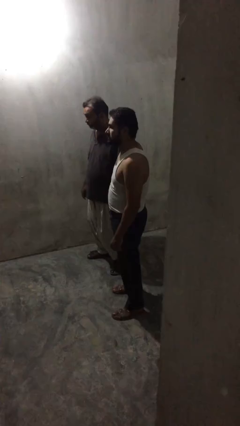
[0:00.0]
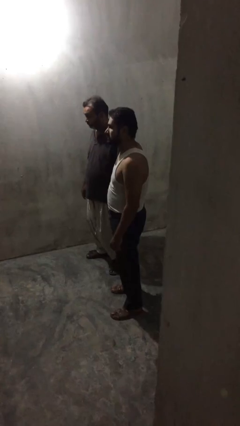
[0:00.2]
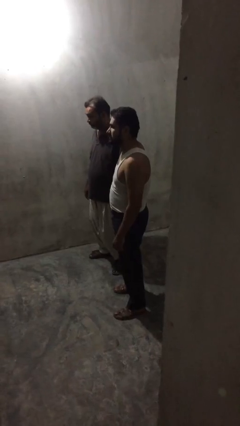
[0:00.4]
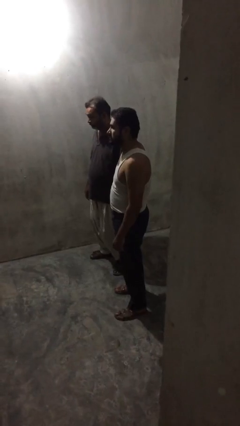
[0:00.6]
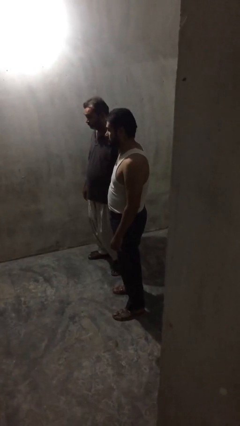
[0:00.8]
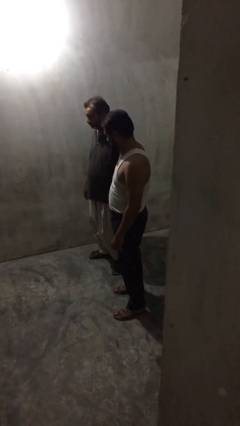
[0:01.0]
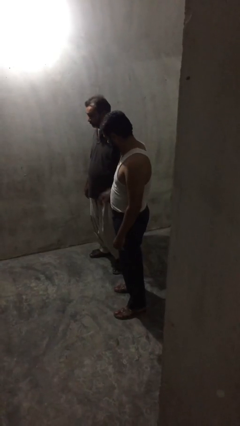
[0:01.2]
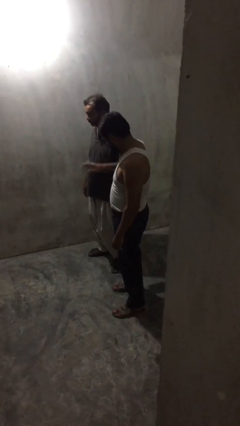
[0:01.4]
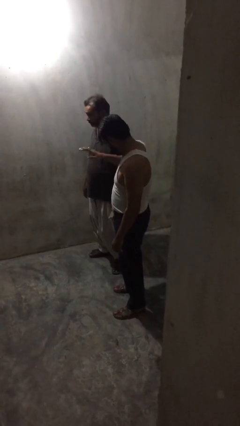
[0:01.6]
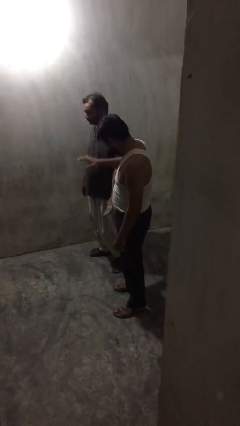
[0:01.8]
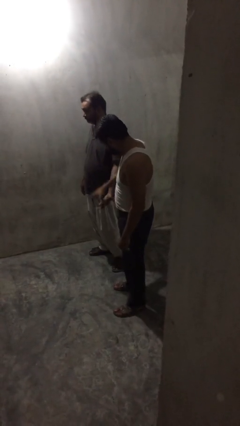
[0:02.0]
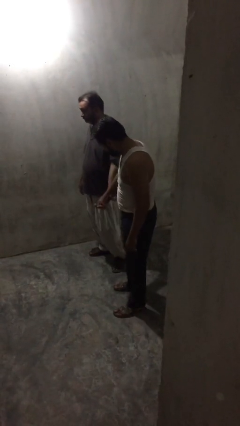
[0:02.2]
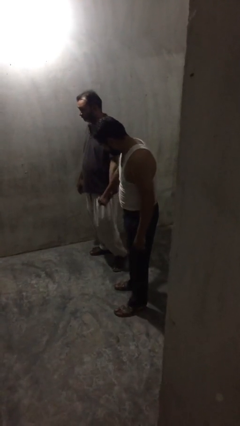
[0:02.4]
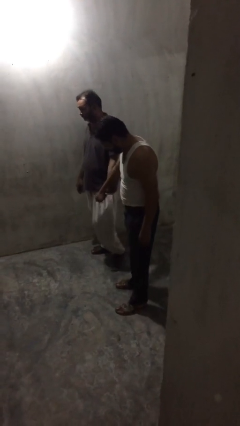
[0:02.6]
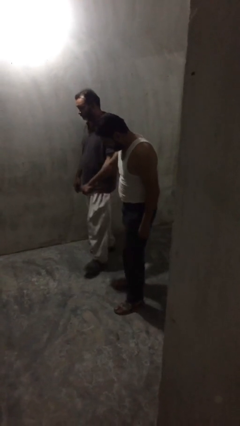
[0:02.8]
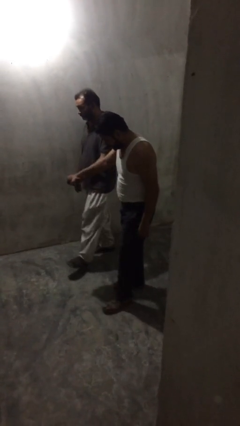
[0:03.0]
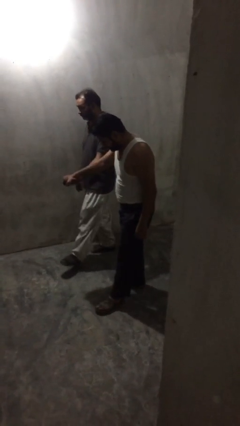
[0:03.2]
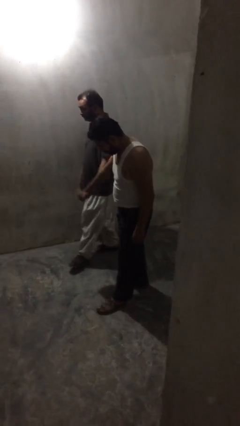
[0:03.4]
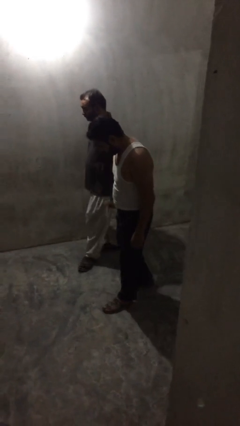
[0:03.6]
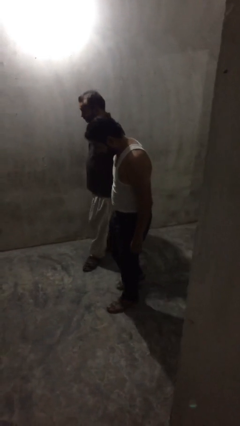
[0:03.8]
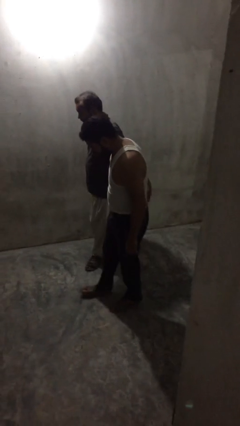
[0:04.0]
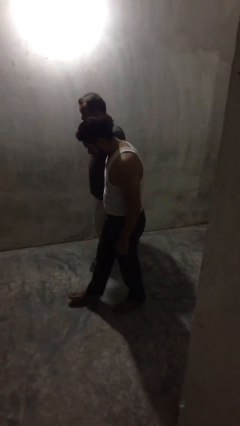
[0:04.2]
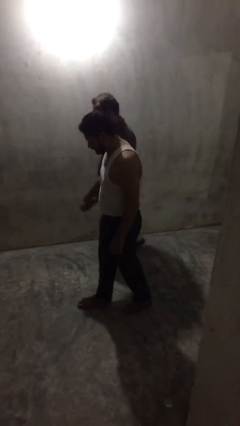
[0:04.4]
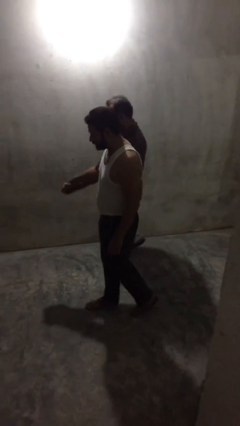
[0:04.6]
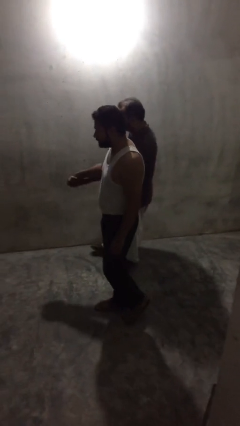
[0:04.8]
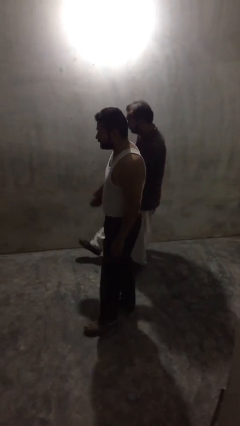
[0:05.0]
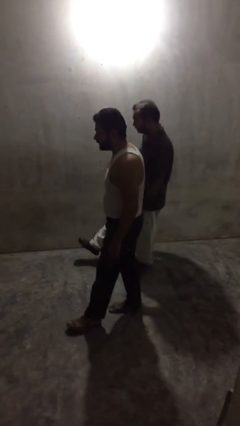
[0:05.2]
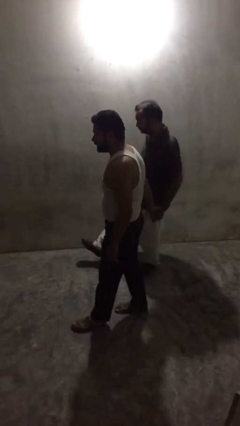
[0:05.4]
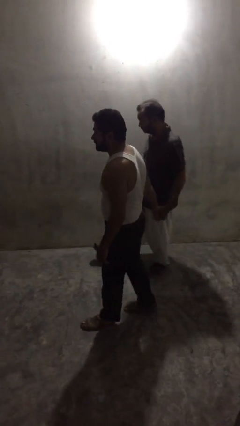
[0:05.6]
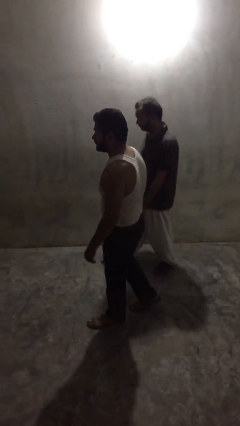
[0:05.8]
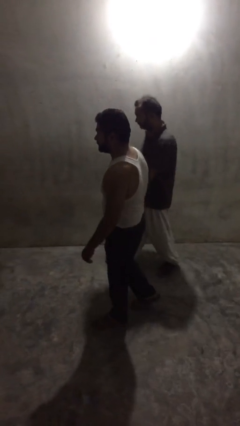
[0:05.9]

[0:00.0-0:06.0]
person holds hand

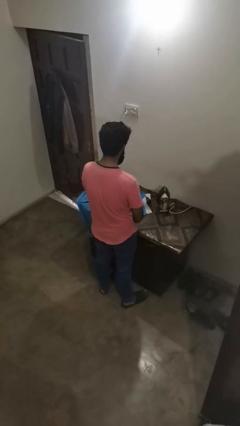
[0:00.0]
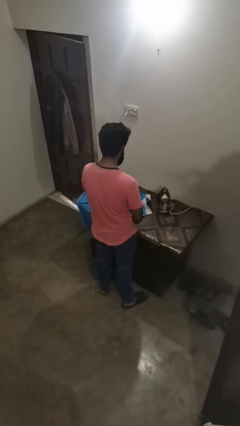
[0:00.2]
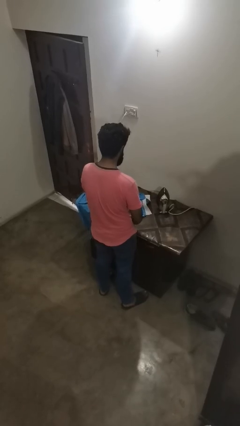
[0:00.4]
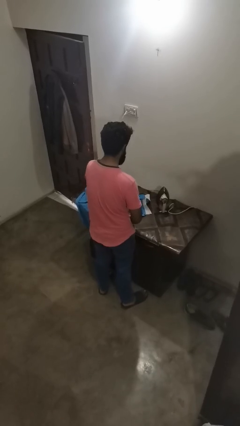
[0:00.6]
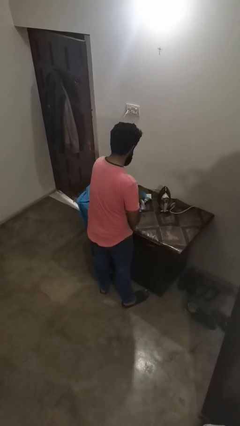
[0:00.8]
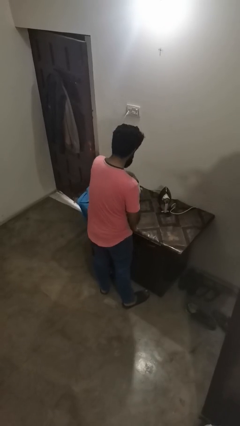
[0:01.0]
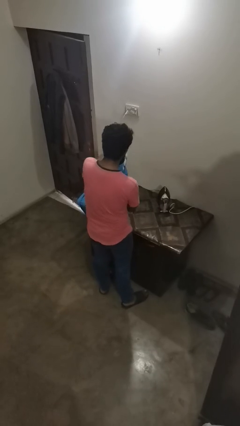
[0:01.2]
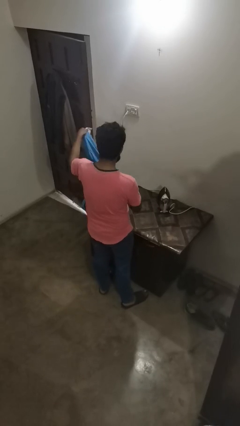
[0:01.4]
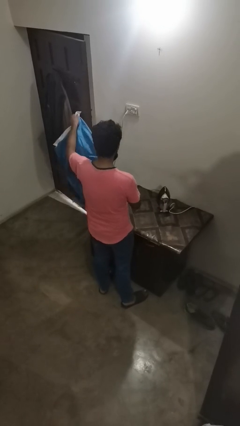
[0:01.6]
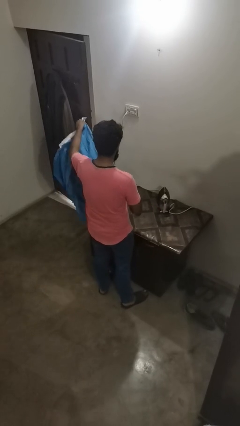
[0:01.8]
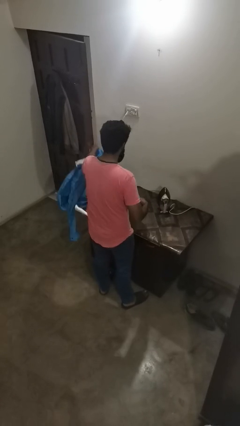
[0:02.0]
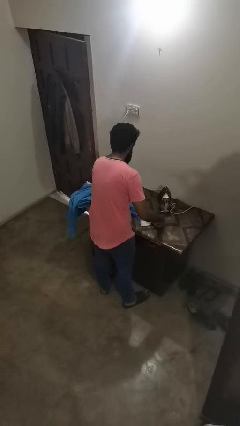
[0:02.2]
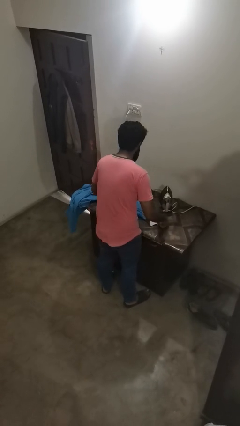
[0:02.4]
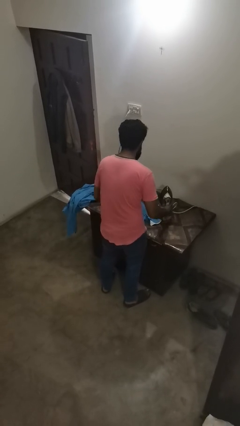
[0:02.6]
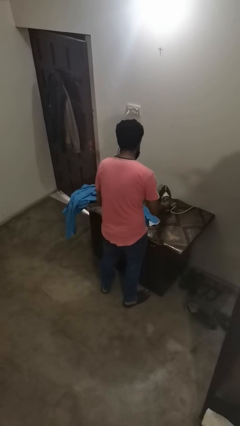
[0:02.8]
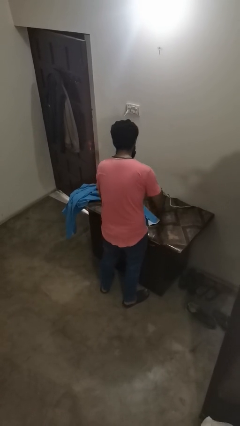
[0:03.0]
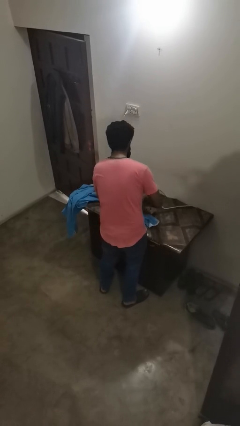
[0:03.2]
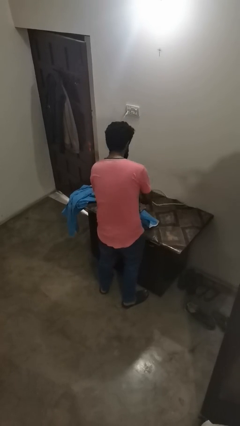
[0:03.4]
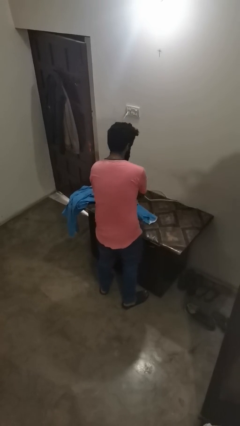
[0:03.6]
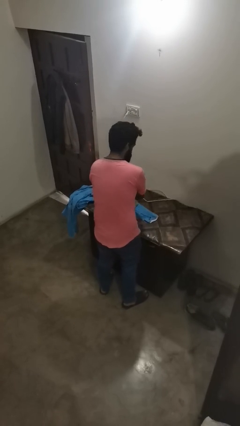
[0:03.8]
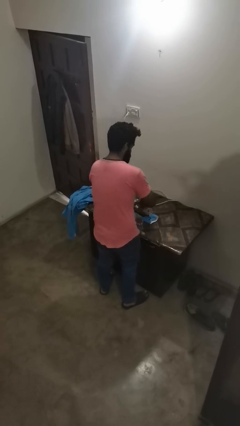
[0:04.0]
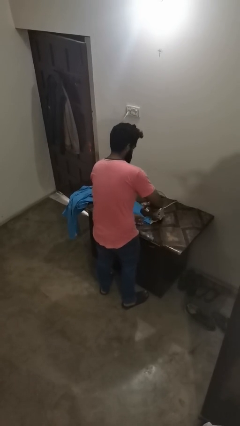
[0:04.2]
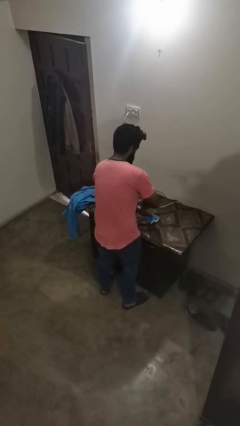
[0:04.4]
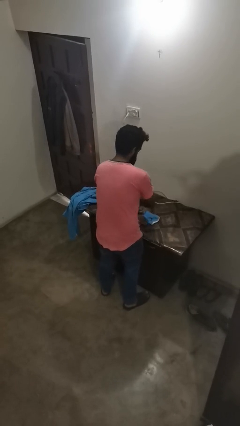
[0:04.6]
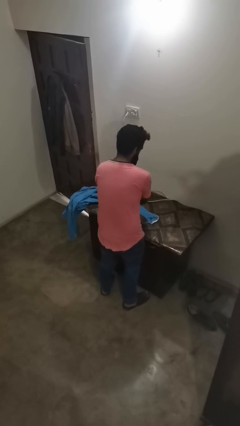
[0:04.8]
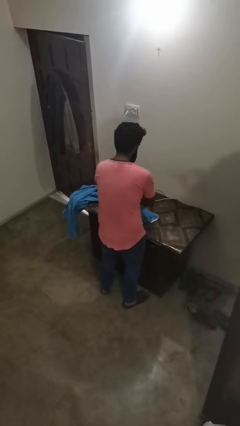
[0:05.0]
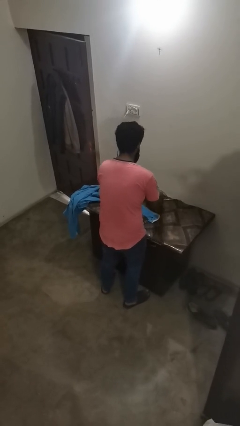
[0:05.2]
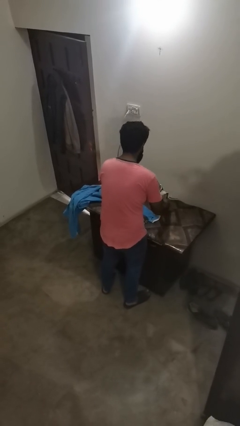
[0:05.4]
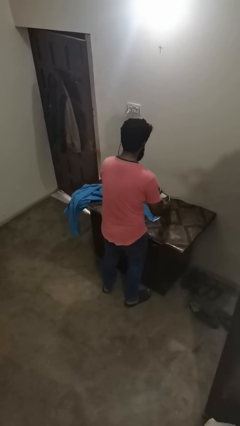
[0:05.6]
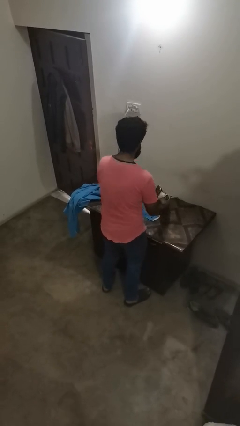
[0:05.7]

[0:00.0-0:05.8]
person irons clothes

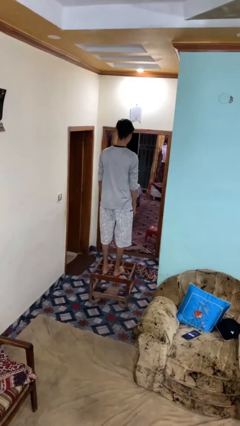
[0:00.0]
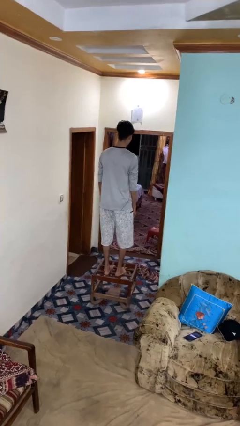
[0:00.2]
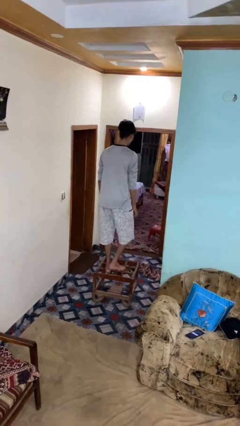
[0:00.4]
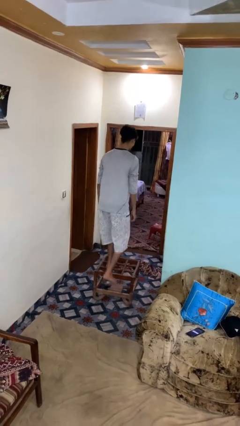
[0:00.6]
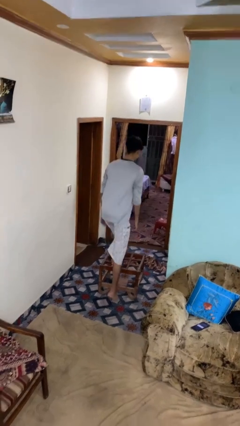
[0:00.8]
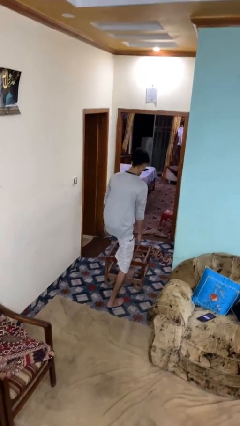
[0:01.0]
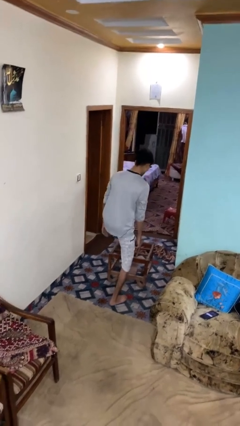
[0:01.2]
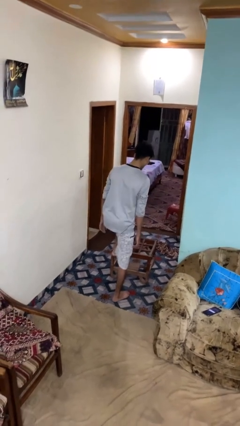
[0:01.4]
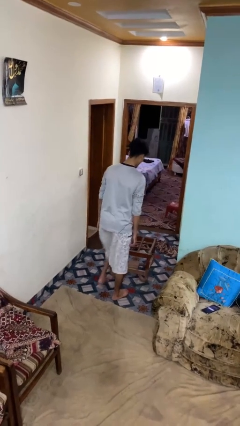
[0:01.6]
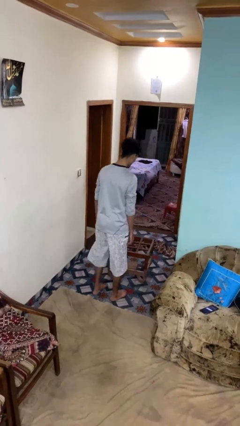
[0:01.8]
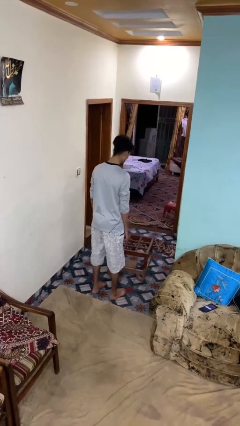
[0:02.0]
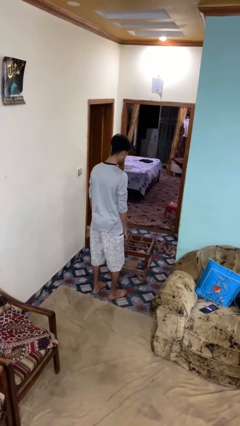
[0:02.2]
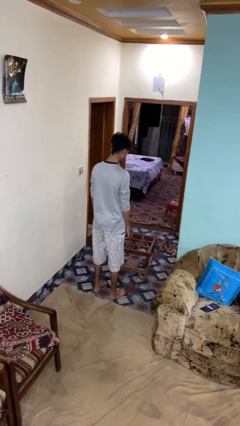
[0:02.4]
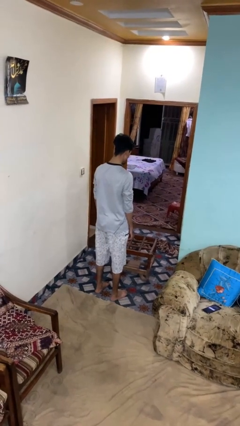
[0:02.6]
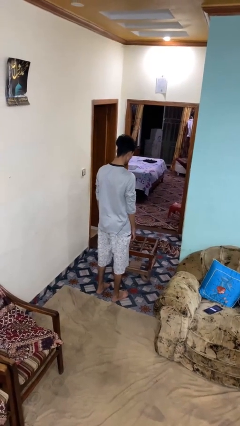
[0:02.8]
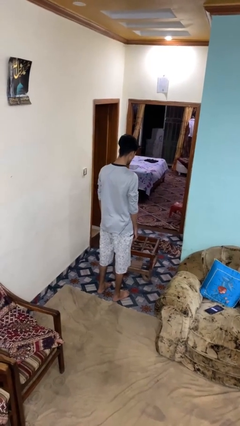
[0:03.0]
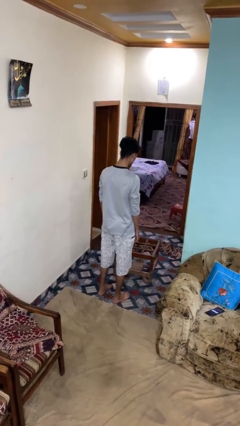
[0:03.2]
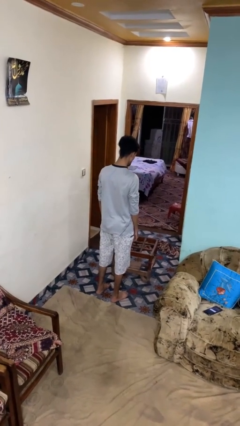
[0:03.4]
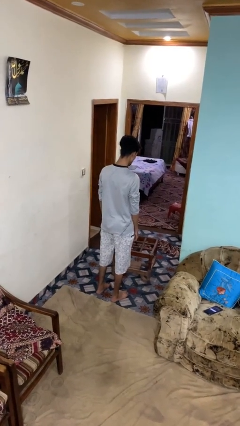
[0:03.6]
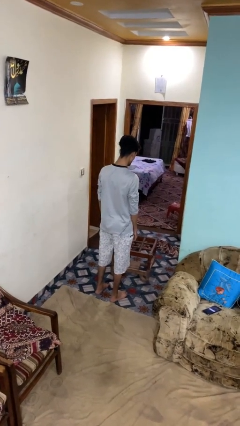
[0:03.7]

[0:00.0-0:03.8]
person climbs off table

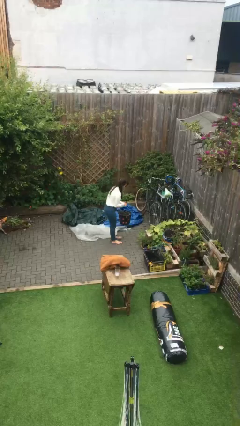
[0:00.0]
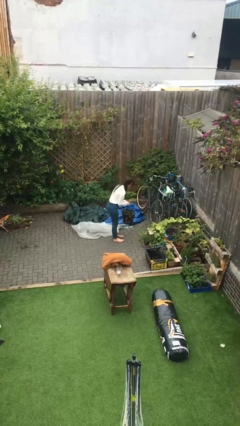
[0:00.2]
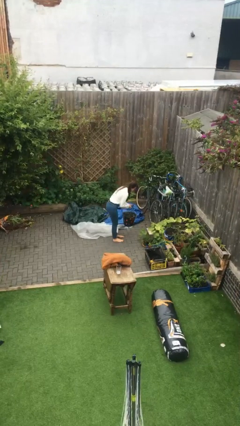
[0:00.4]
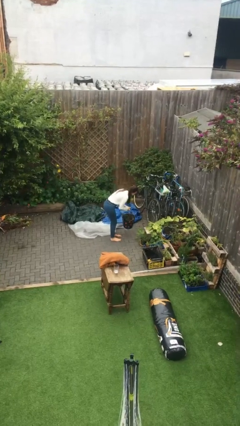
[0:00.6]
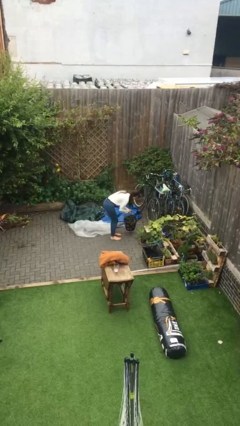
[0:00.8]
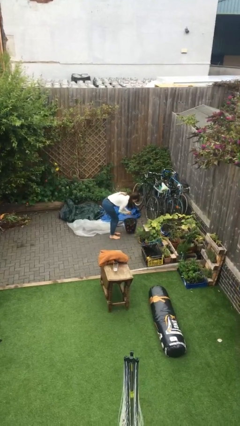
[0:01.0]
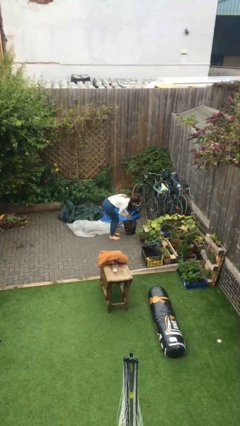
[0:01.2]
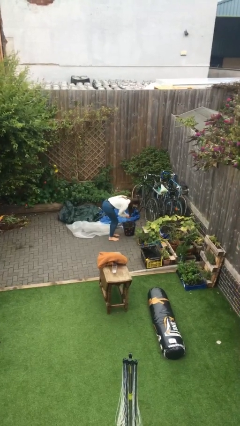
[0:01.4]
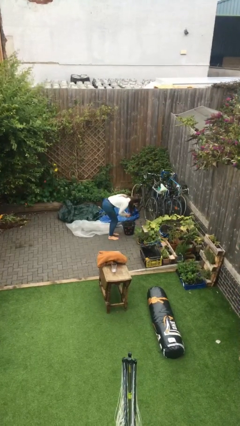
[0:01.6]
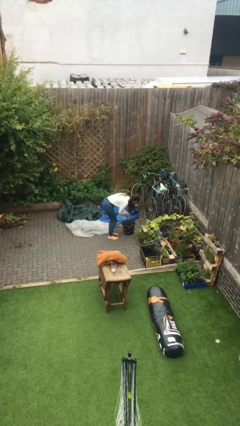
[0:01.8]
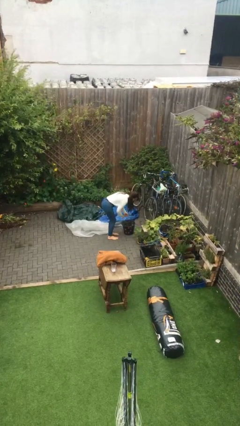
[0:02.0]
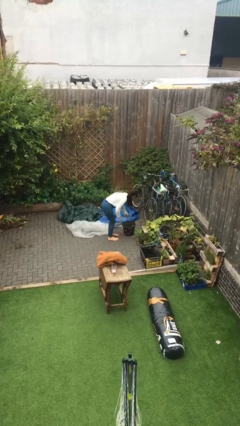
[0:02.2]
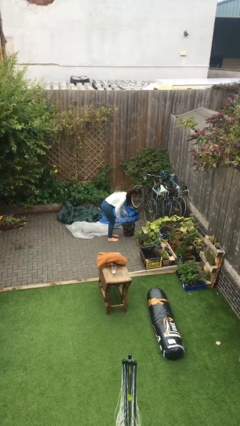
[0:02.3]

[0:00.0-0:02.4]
person puts down object on floor
